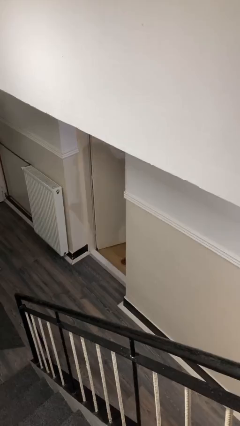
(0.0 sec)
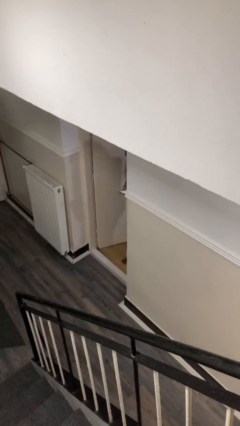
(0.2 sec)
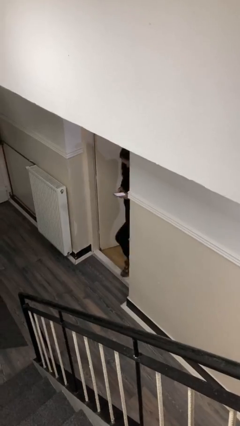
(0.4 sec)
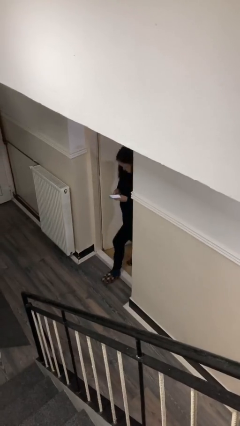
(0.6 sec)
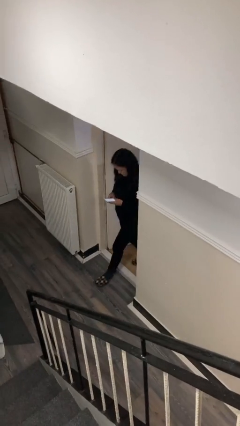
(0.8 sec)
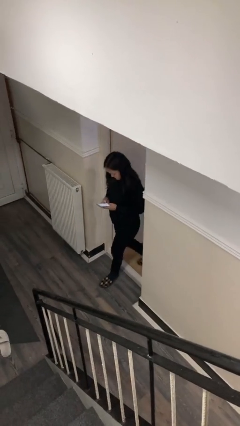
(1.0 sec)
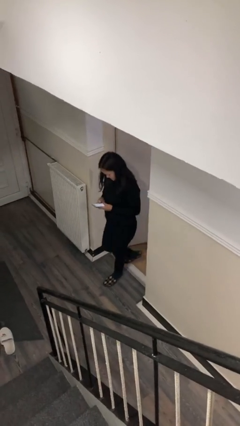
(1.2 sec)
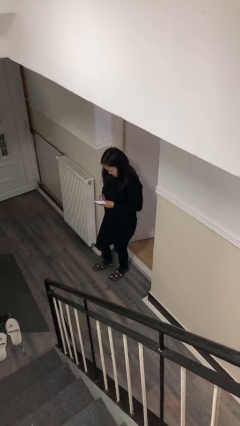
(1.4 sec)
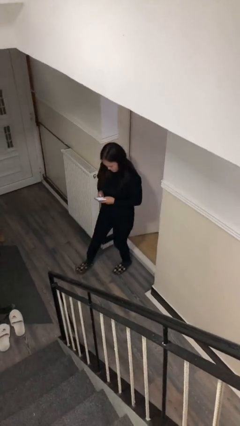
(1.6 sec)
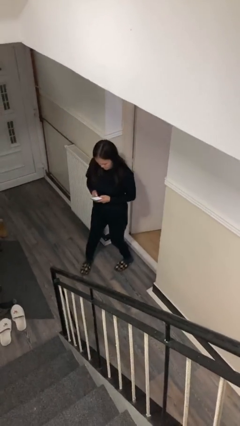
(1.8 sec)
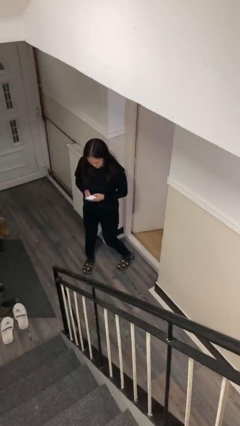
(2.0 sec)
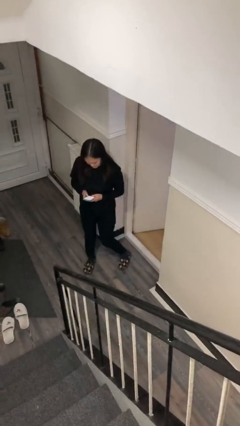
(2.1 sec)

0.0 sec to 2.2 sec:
person enters scene through structure

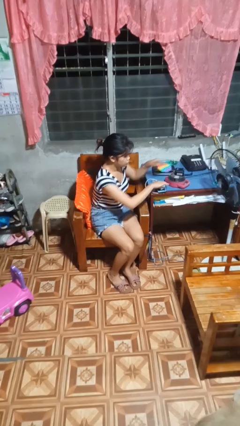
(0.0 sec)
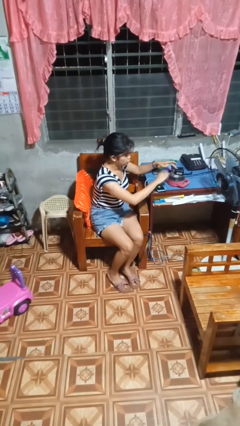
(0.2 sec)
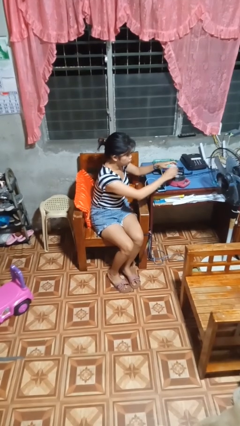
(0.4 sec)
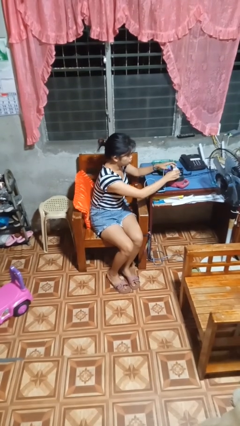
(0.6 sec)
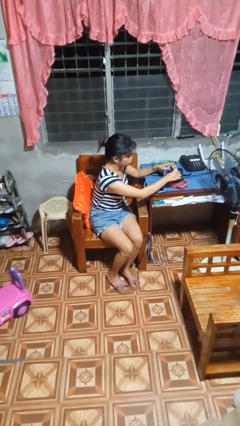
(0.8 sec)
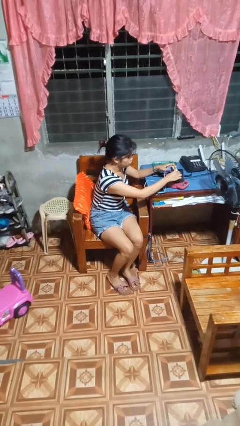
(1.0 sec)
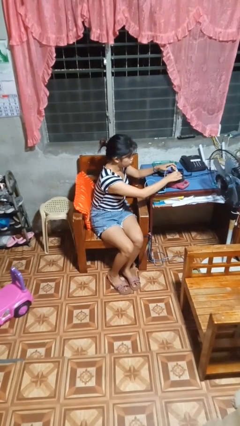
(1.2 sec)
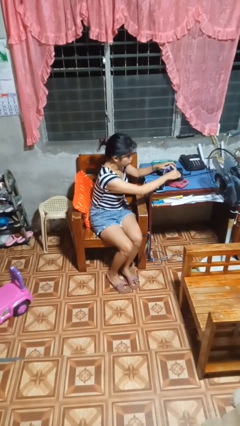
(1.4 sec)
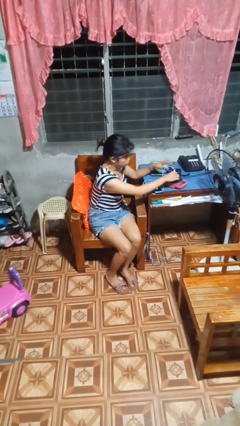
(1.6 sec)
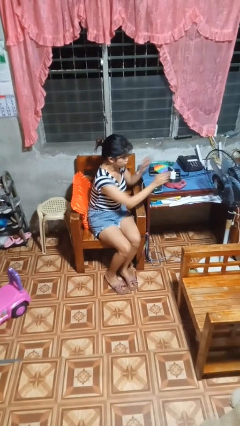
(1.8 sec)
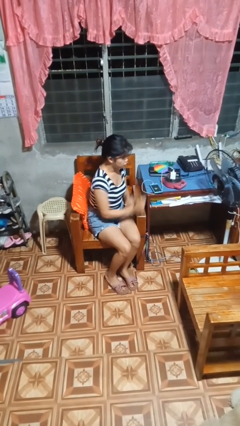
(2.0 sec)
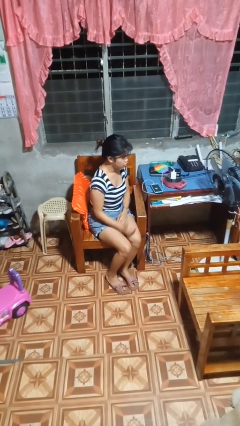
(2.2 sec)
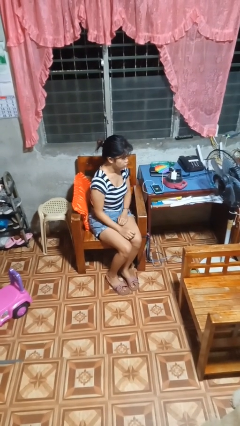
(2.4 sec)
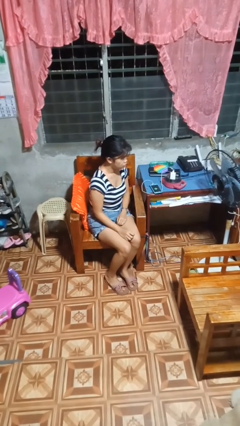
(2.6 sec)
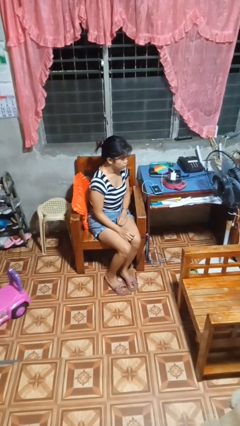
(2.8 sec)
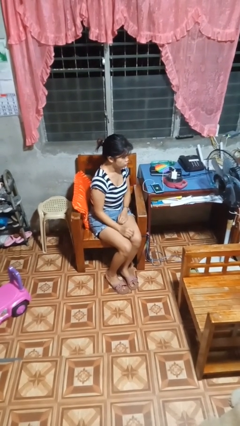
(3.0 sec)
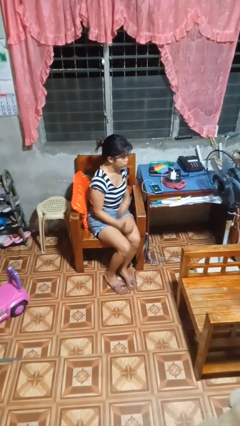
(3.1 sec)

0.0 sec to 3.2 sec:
person plugs into electrical socket

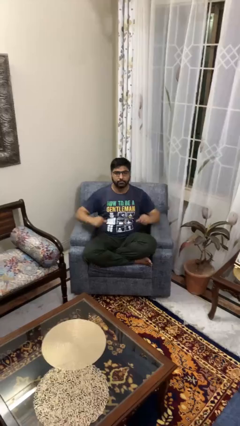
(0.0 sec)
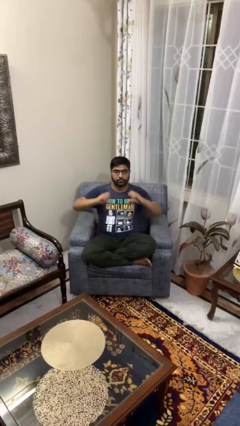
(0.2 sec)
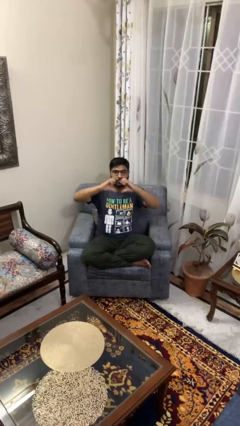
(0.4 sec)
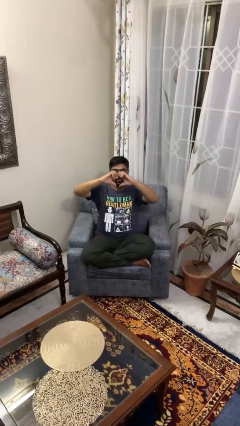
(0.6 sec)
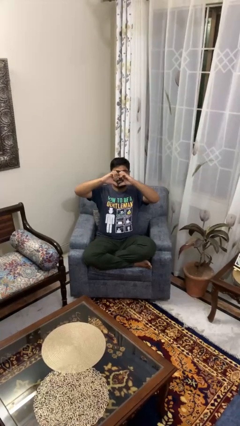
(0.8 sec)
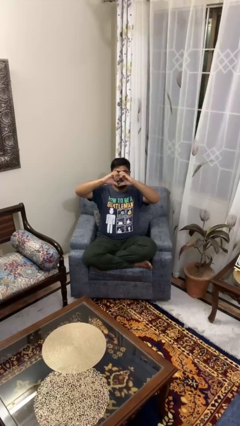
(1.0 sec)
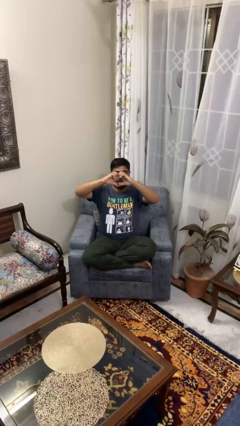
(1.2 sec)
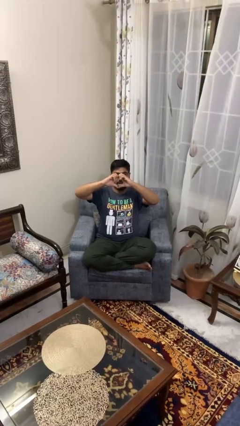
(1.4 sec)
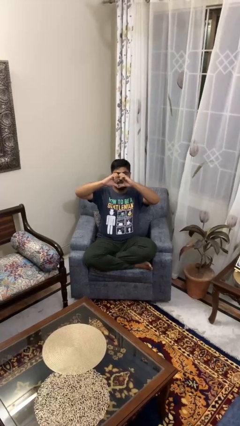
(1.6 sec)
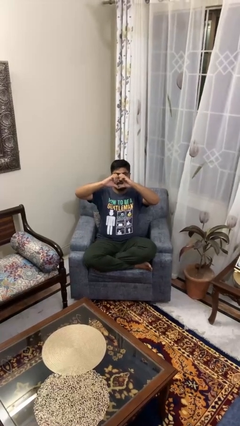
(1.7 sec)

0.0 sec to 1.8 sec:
person gestures heart

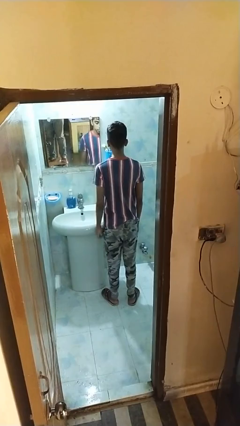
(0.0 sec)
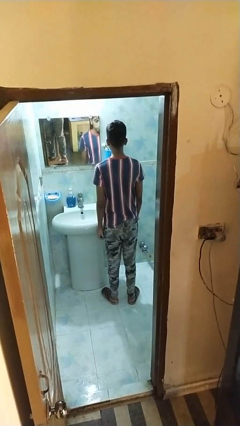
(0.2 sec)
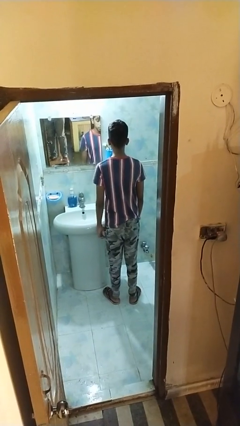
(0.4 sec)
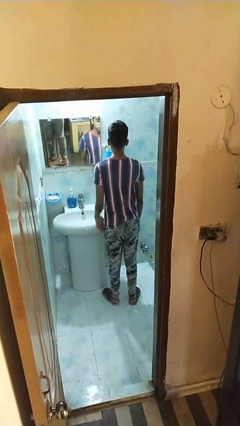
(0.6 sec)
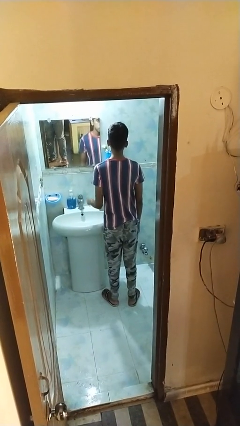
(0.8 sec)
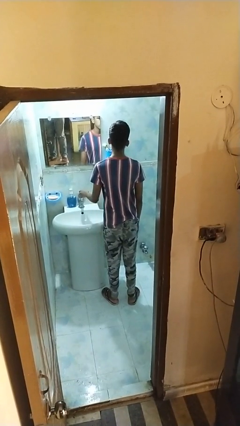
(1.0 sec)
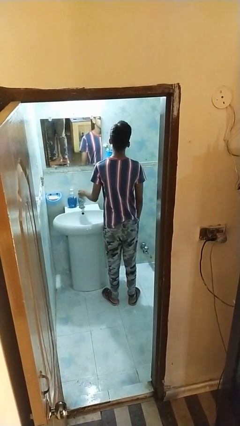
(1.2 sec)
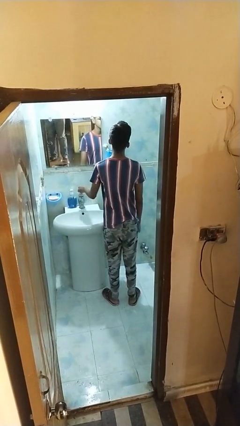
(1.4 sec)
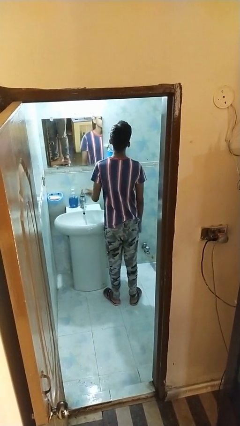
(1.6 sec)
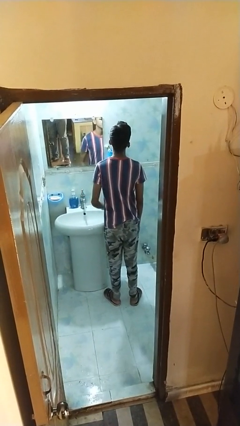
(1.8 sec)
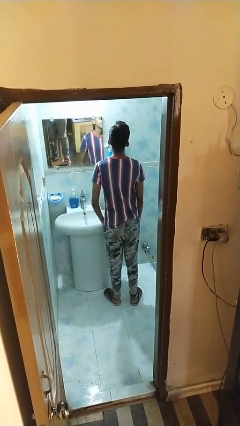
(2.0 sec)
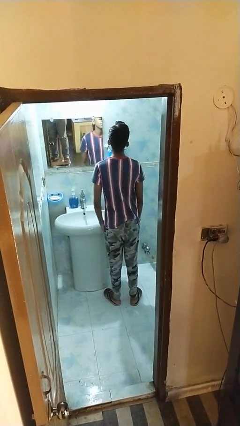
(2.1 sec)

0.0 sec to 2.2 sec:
person turns on faucet

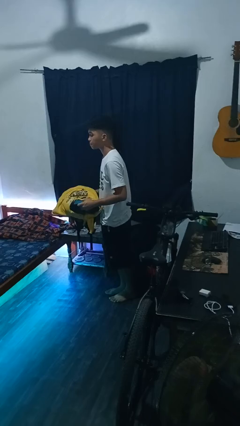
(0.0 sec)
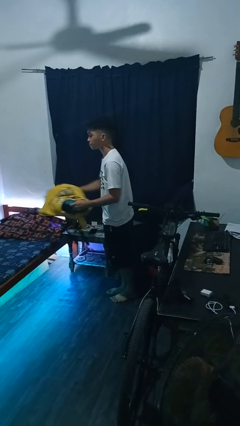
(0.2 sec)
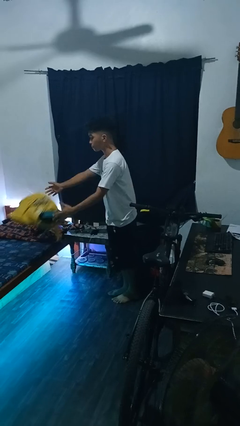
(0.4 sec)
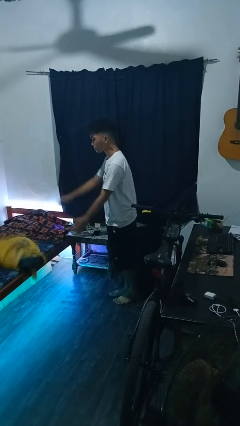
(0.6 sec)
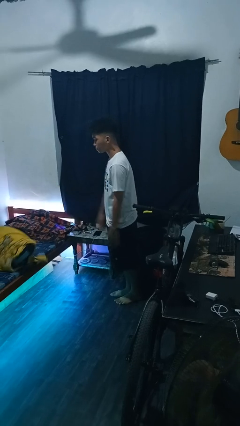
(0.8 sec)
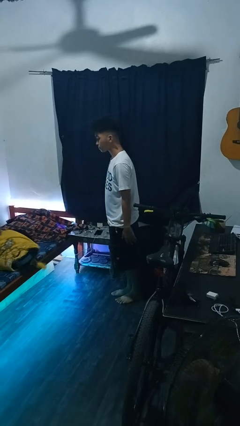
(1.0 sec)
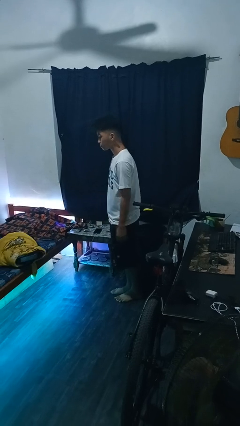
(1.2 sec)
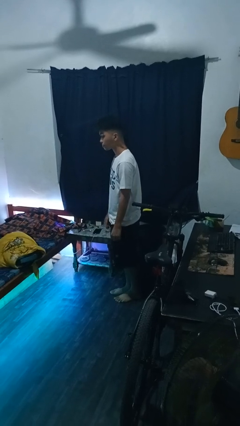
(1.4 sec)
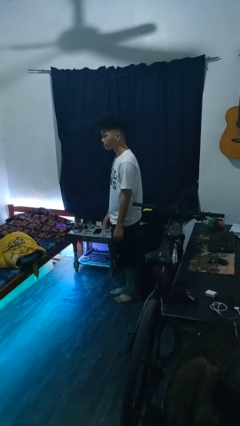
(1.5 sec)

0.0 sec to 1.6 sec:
person throws object on bed

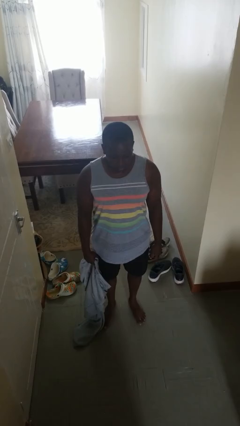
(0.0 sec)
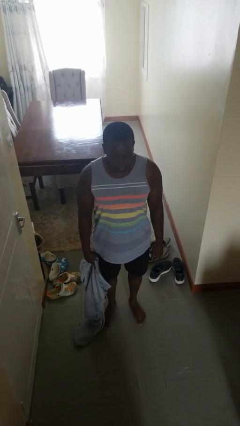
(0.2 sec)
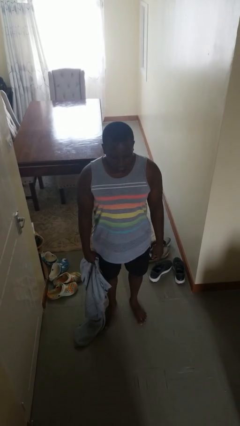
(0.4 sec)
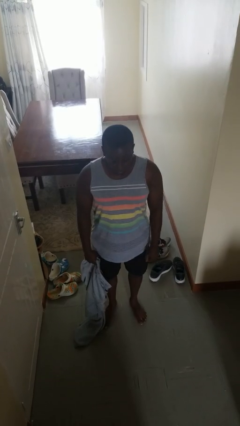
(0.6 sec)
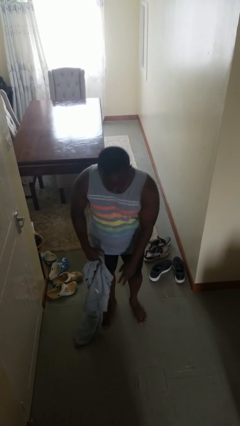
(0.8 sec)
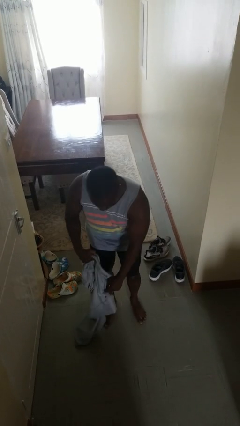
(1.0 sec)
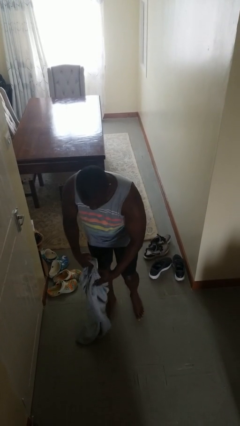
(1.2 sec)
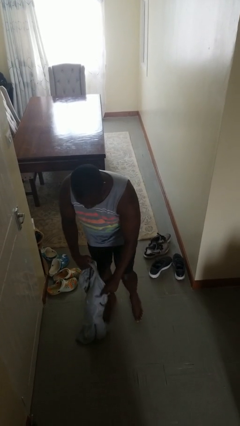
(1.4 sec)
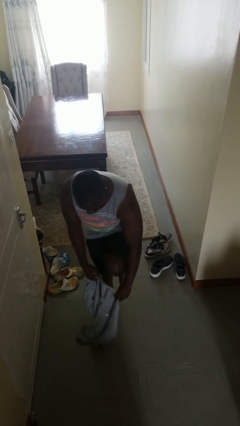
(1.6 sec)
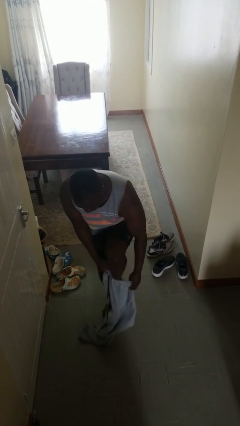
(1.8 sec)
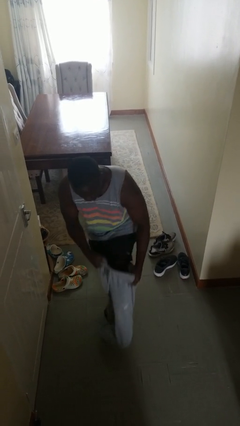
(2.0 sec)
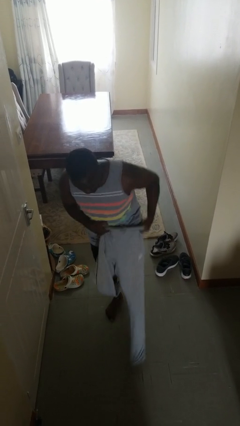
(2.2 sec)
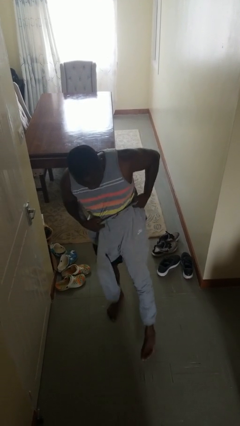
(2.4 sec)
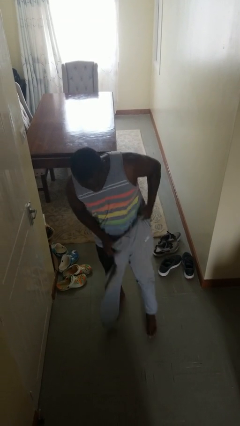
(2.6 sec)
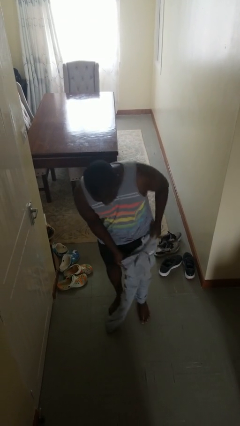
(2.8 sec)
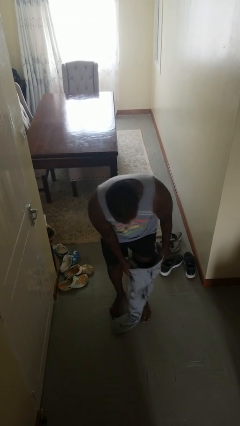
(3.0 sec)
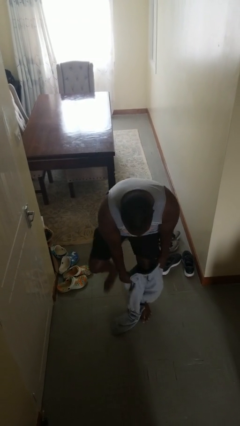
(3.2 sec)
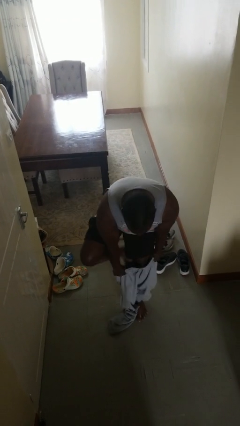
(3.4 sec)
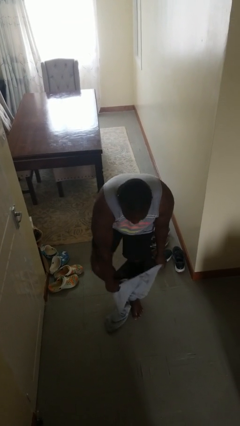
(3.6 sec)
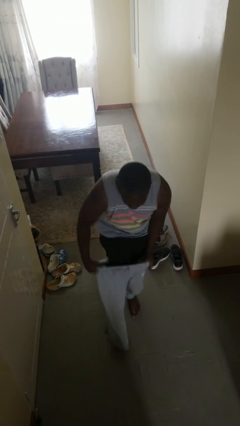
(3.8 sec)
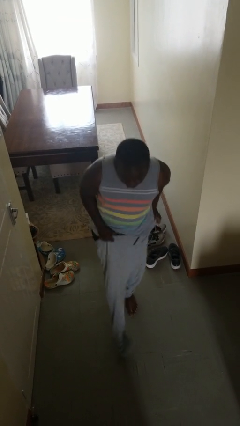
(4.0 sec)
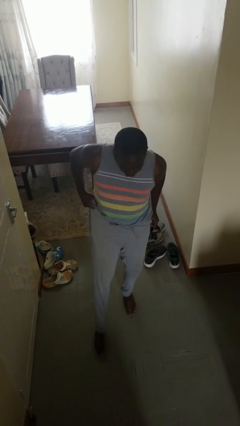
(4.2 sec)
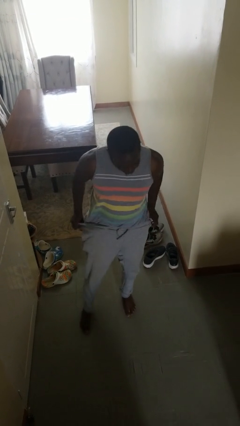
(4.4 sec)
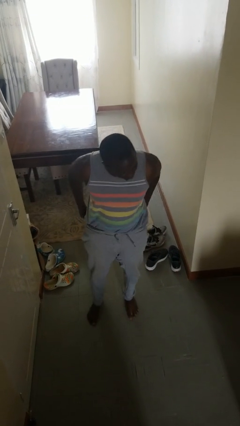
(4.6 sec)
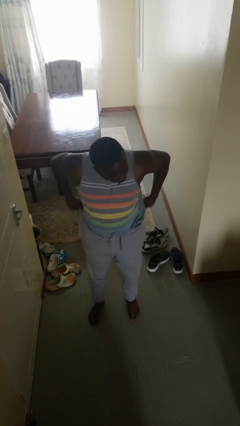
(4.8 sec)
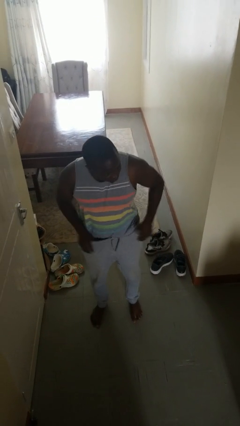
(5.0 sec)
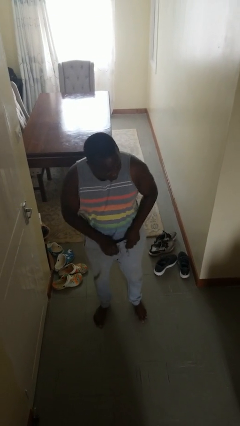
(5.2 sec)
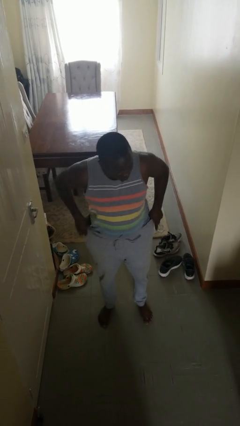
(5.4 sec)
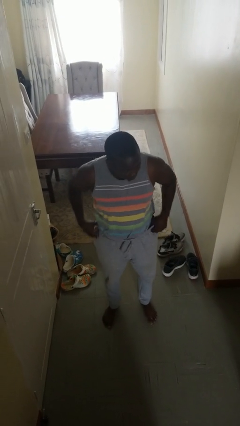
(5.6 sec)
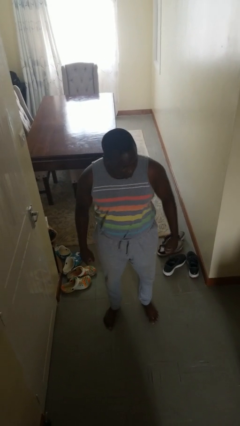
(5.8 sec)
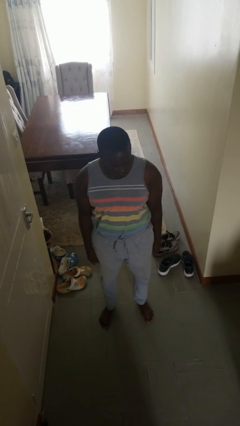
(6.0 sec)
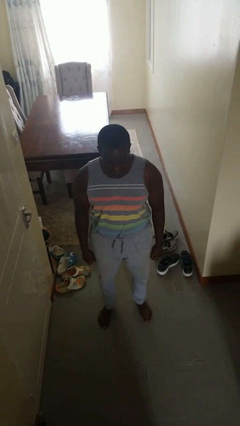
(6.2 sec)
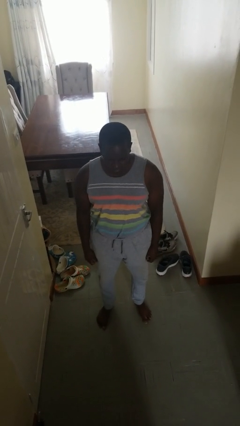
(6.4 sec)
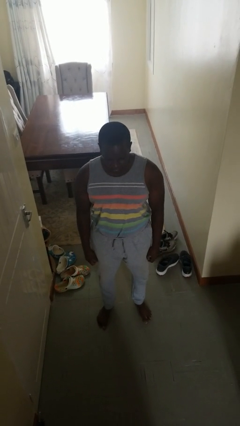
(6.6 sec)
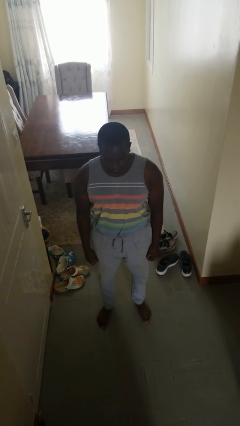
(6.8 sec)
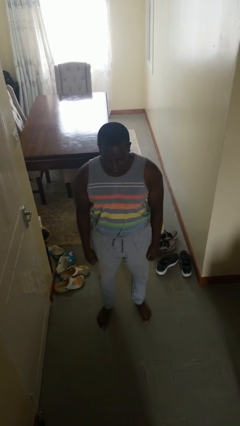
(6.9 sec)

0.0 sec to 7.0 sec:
person puts on pants
